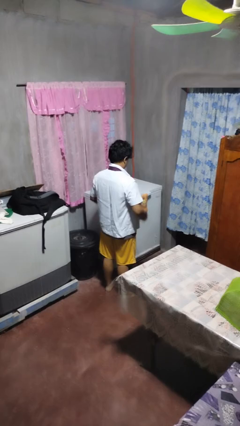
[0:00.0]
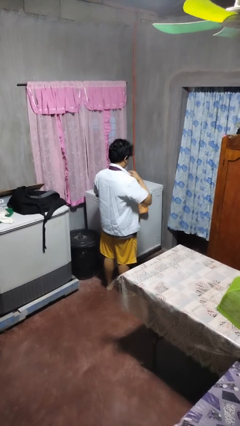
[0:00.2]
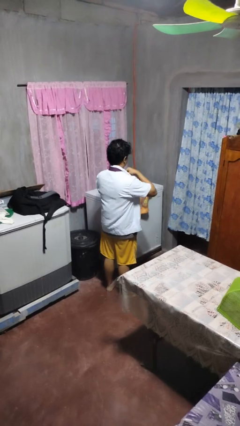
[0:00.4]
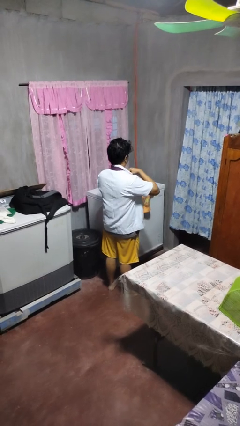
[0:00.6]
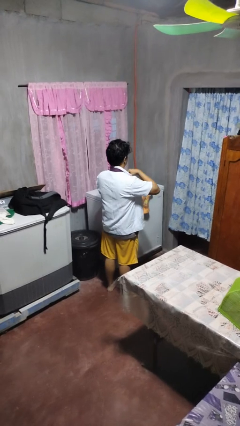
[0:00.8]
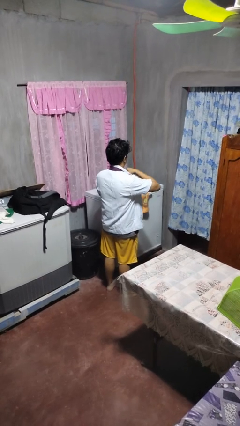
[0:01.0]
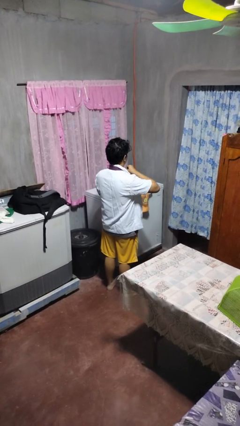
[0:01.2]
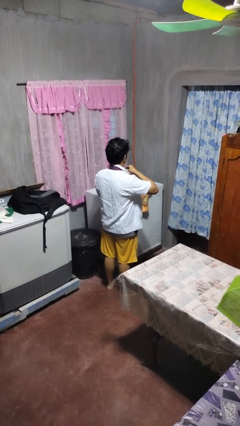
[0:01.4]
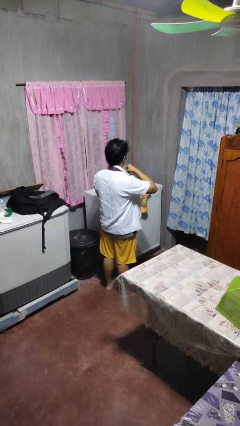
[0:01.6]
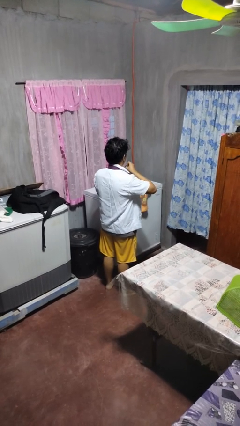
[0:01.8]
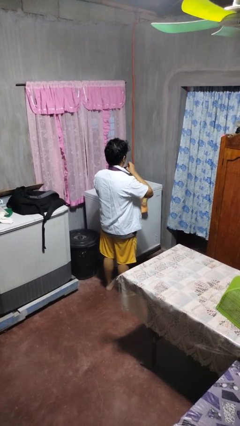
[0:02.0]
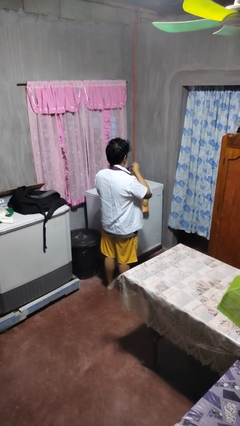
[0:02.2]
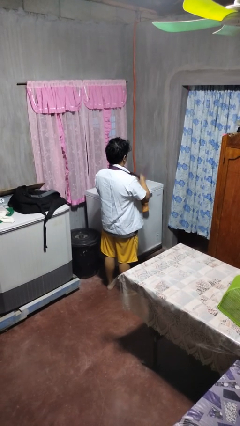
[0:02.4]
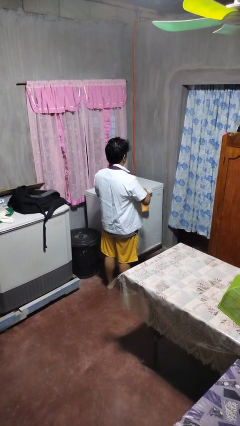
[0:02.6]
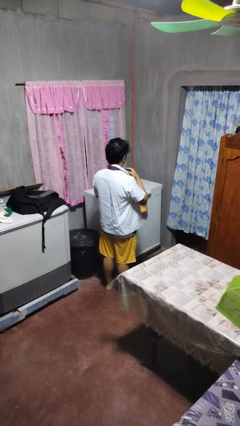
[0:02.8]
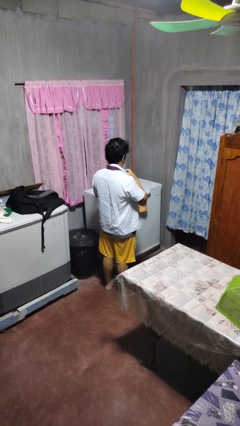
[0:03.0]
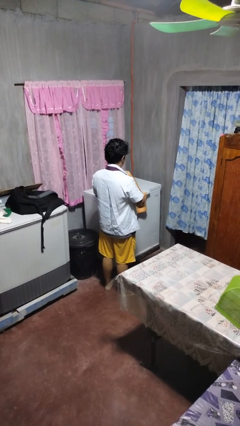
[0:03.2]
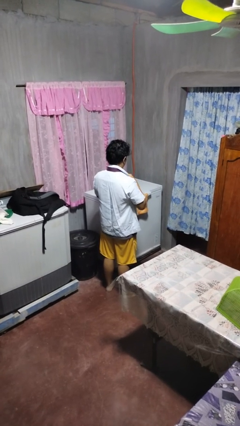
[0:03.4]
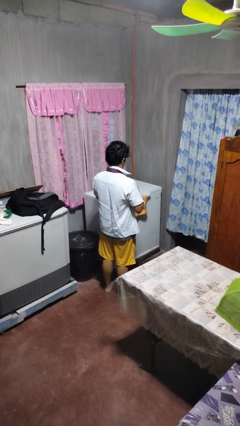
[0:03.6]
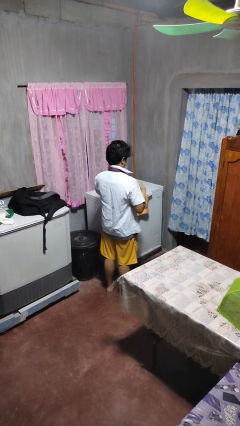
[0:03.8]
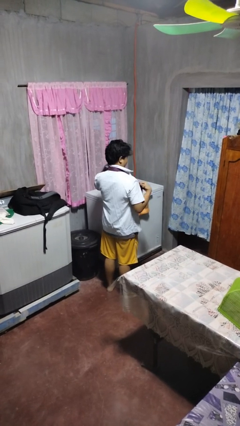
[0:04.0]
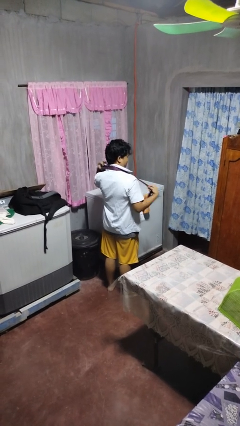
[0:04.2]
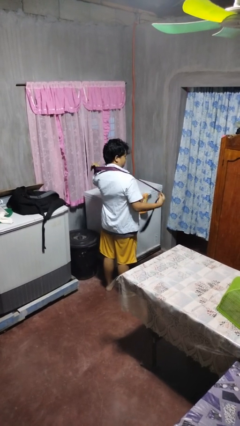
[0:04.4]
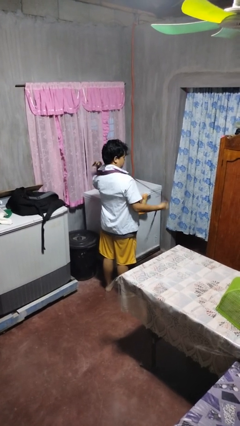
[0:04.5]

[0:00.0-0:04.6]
person takes off necktie

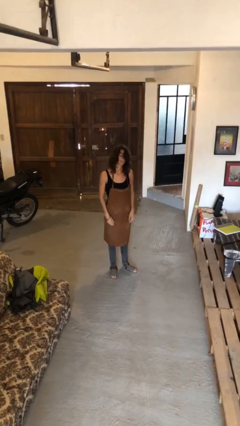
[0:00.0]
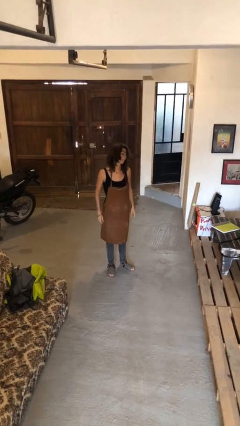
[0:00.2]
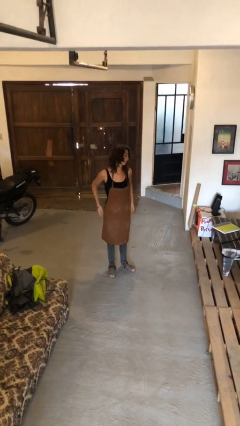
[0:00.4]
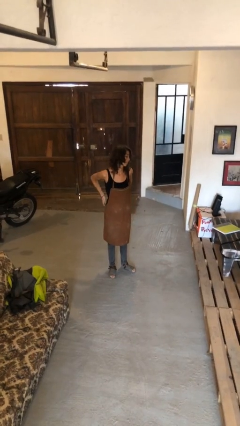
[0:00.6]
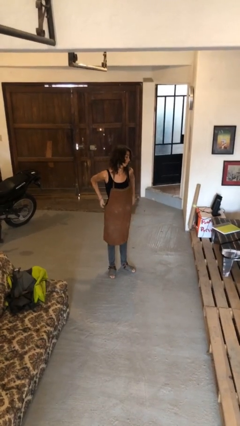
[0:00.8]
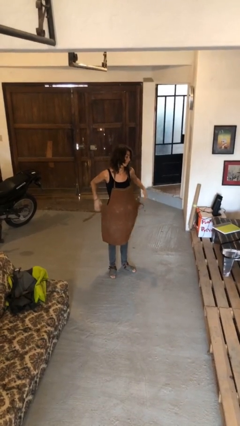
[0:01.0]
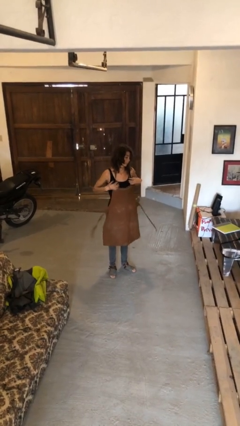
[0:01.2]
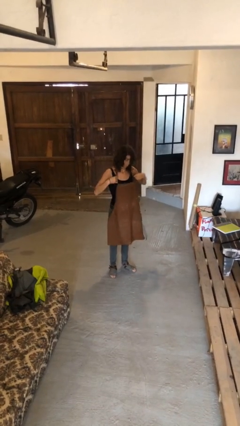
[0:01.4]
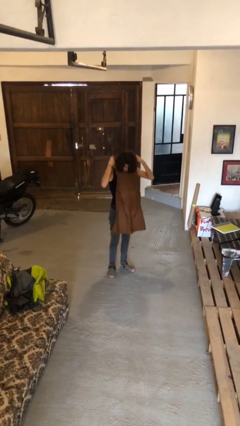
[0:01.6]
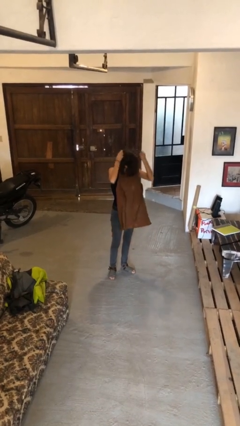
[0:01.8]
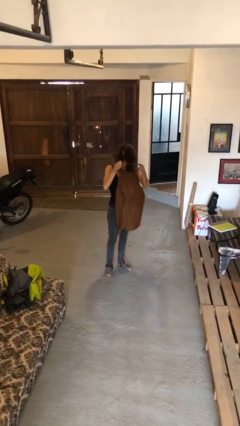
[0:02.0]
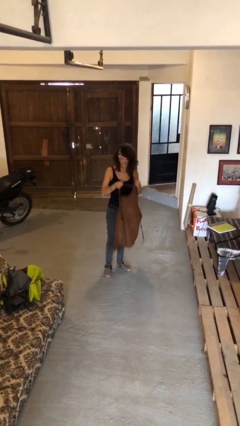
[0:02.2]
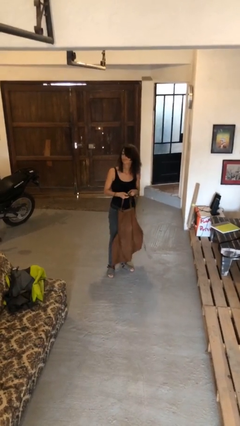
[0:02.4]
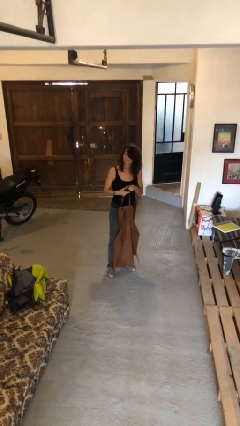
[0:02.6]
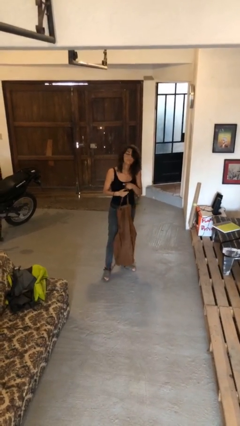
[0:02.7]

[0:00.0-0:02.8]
person takes off apron

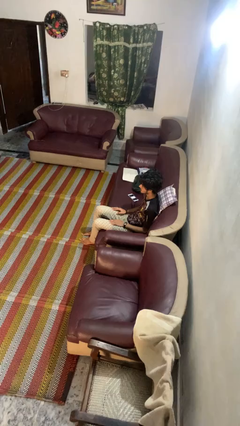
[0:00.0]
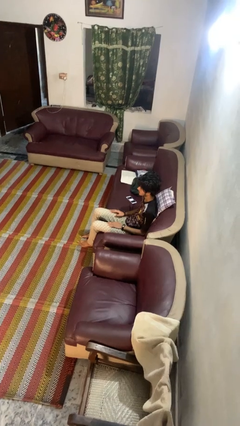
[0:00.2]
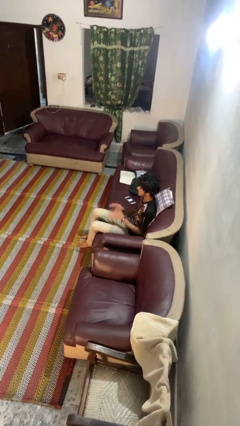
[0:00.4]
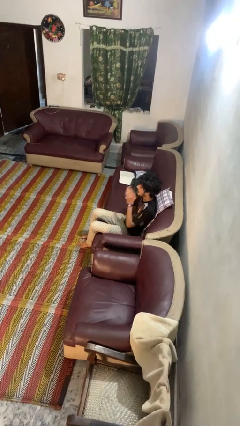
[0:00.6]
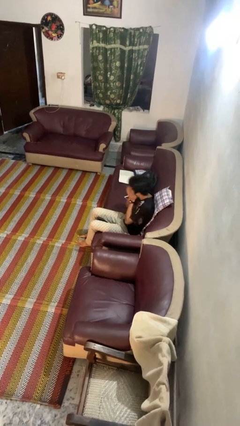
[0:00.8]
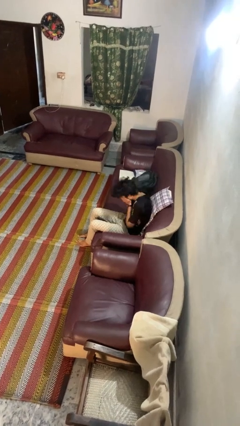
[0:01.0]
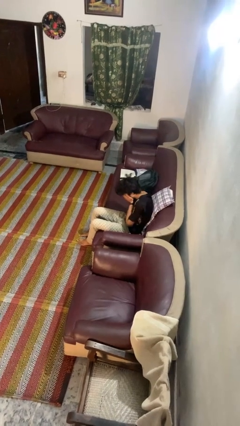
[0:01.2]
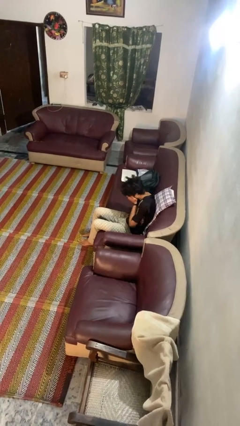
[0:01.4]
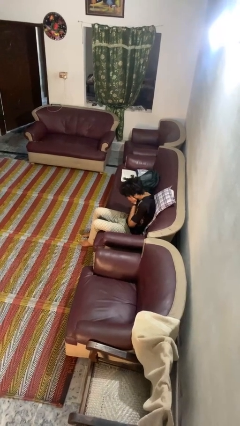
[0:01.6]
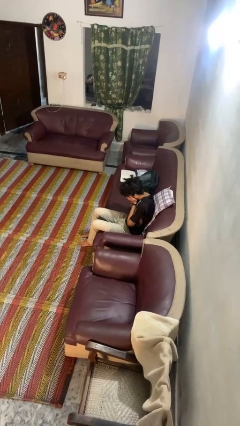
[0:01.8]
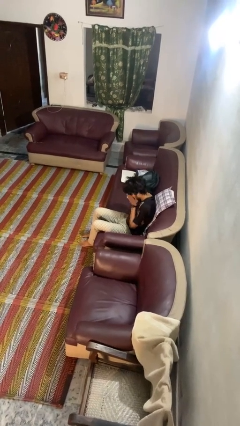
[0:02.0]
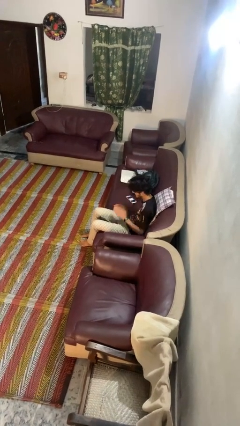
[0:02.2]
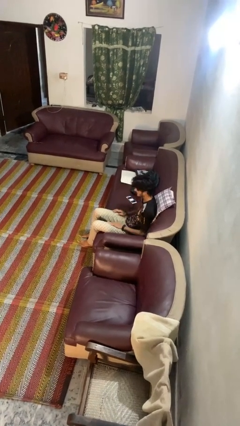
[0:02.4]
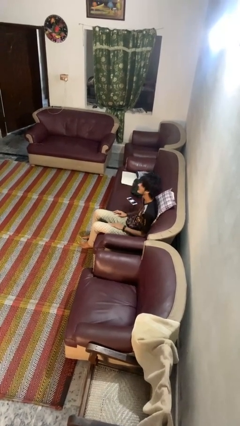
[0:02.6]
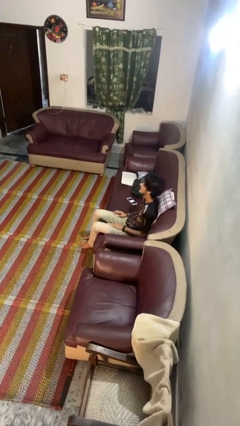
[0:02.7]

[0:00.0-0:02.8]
person sneezes into hand

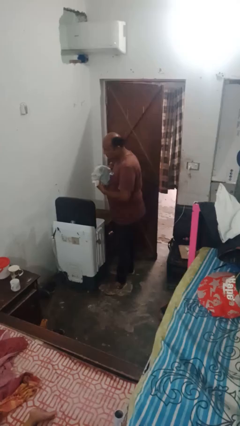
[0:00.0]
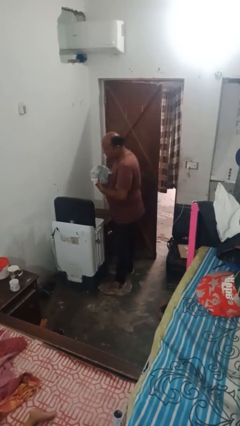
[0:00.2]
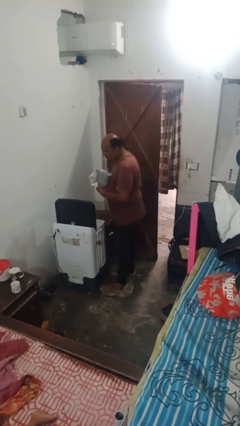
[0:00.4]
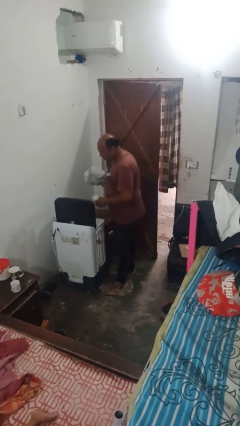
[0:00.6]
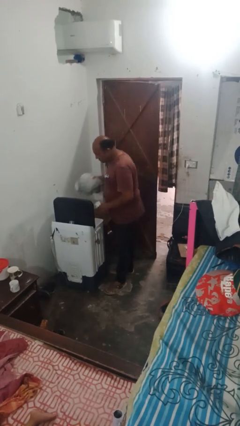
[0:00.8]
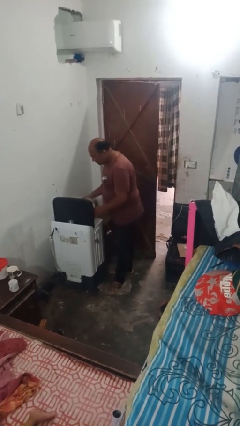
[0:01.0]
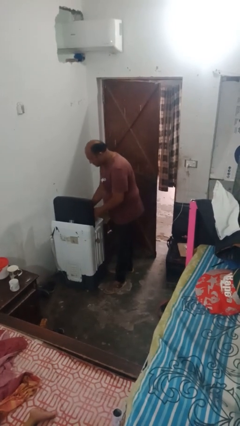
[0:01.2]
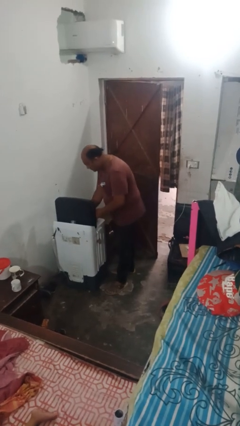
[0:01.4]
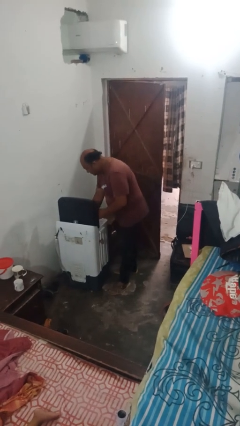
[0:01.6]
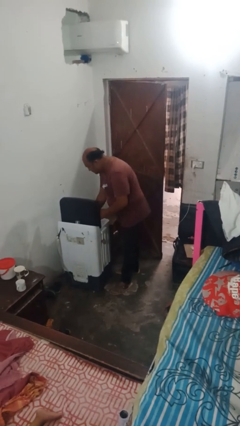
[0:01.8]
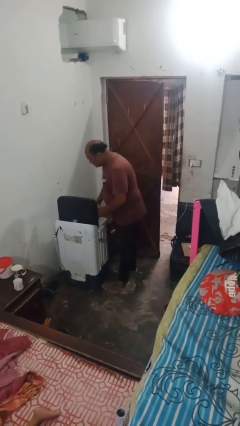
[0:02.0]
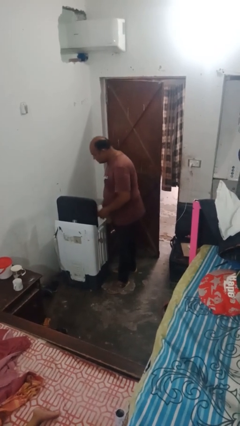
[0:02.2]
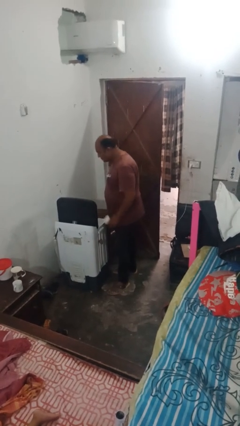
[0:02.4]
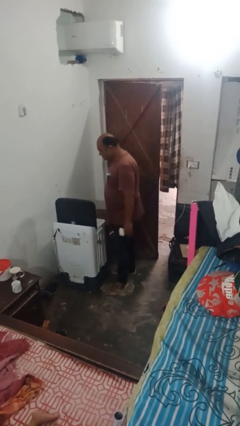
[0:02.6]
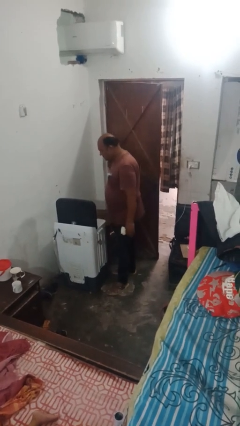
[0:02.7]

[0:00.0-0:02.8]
person loads dryer

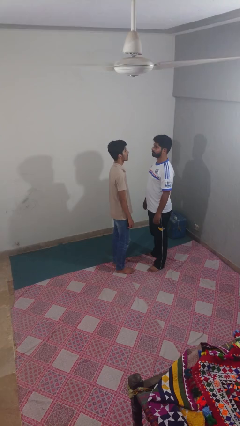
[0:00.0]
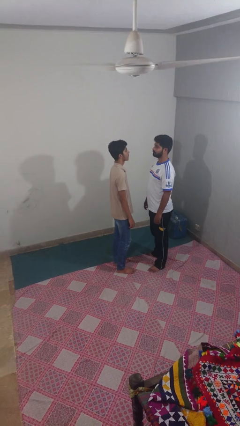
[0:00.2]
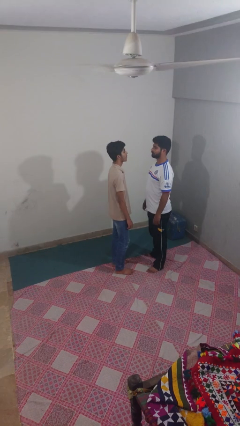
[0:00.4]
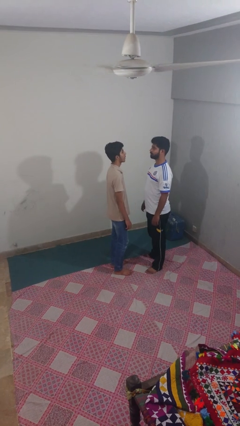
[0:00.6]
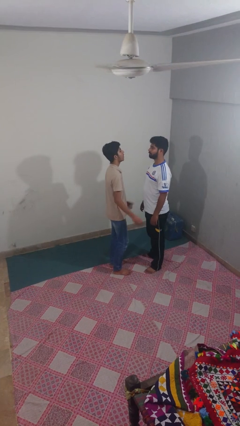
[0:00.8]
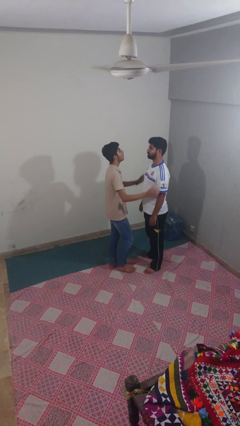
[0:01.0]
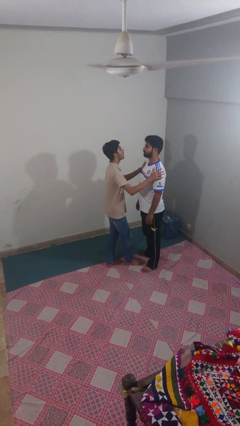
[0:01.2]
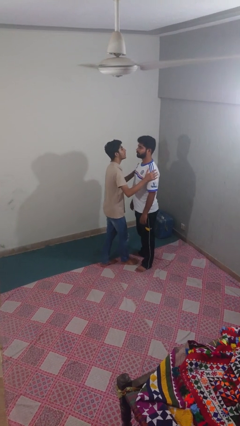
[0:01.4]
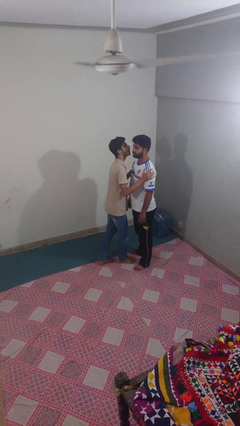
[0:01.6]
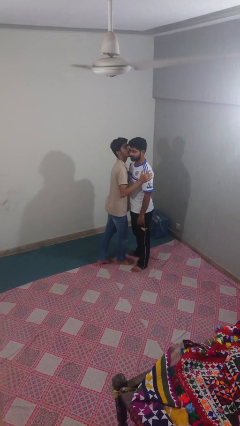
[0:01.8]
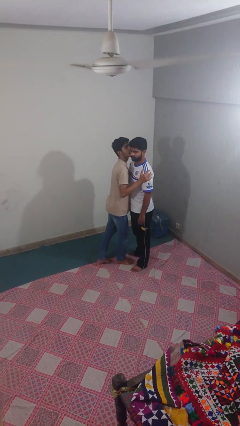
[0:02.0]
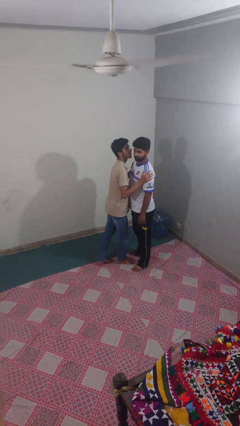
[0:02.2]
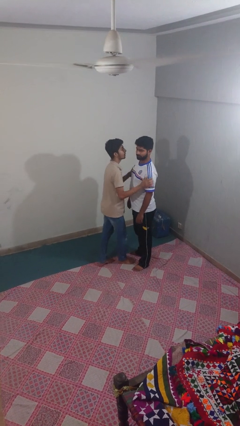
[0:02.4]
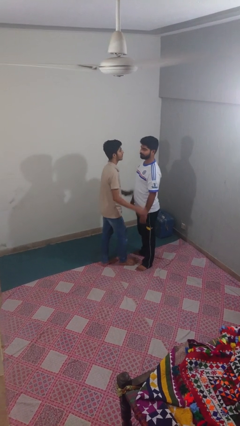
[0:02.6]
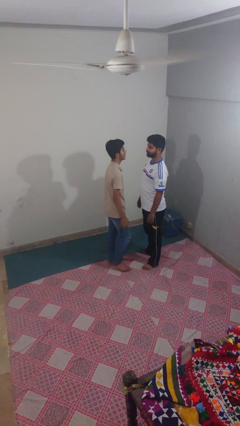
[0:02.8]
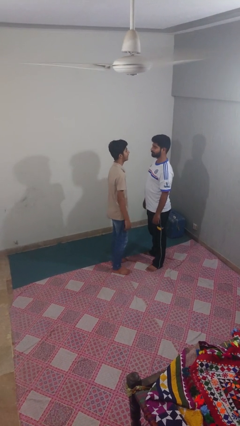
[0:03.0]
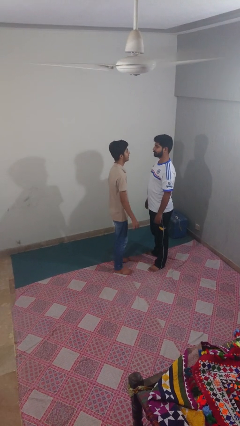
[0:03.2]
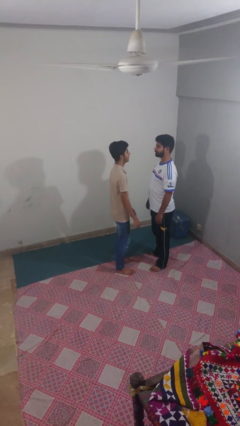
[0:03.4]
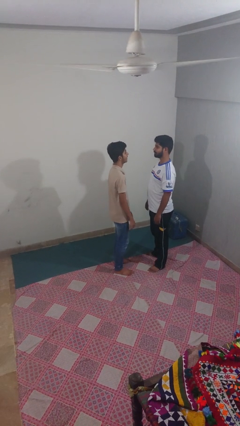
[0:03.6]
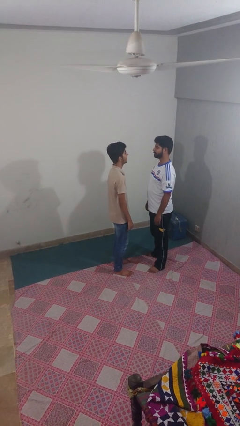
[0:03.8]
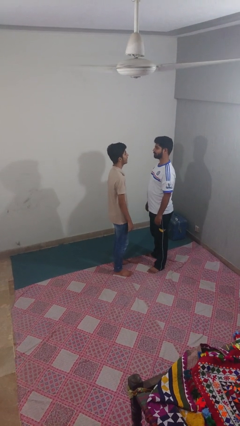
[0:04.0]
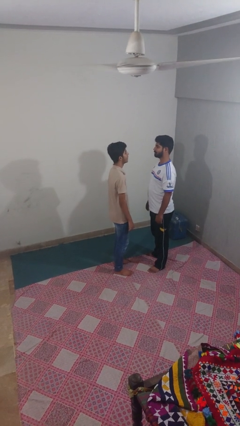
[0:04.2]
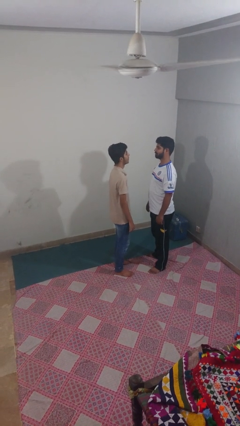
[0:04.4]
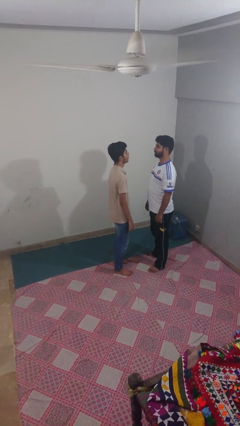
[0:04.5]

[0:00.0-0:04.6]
person kisses cheek of person
